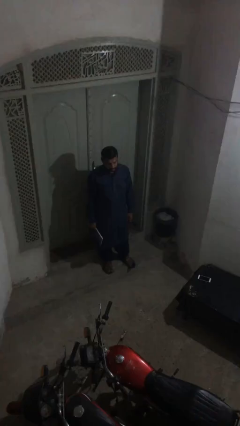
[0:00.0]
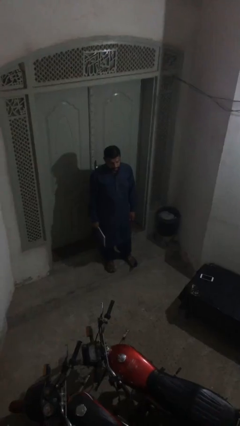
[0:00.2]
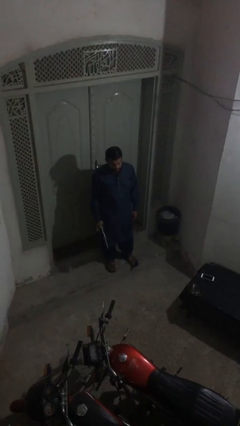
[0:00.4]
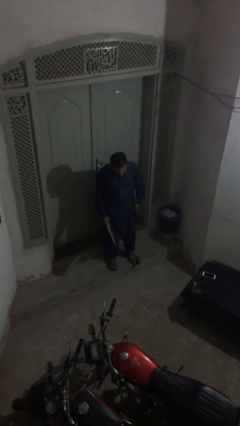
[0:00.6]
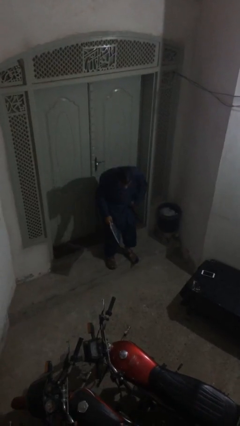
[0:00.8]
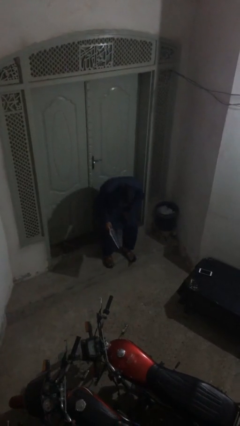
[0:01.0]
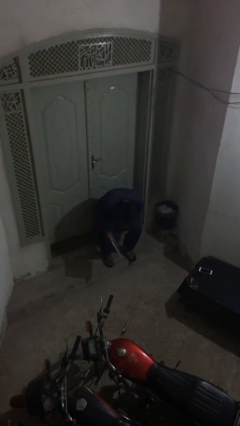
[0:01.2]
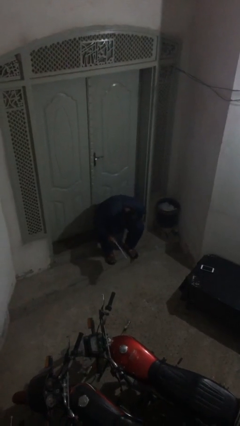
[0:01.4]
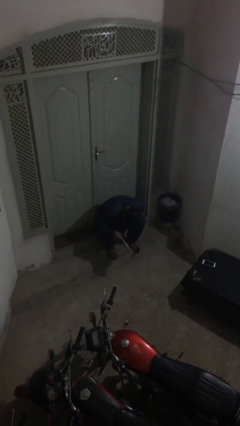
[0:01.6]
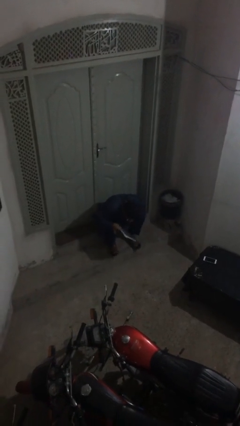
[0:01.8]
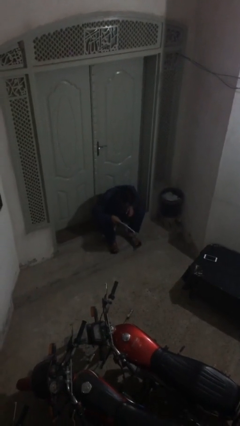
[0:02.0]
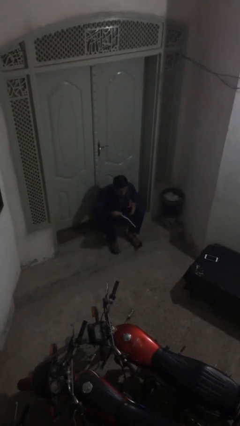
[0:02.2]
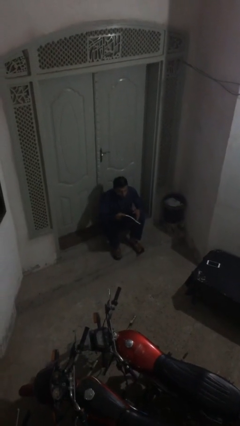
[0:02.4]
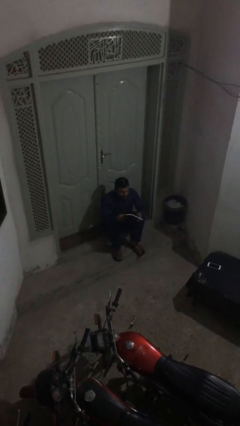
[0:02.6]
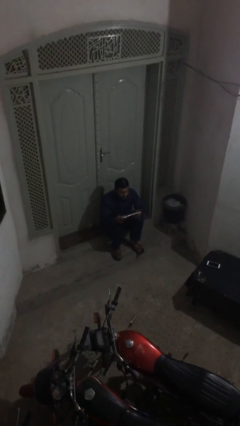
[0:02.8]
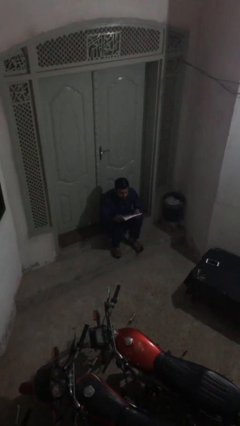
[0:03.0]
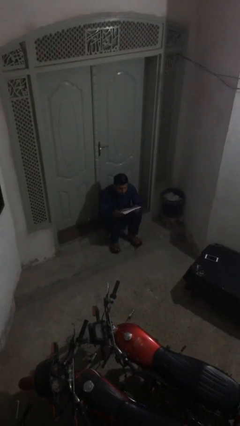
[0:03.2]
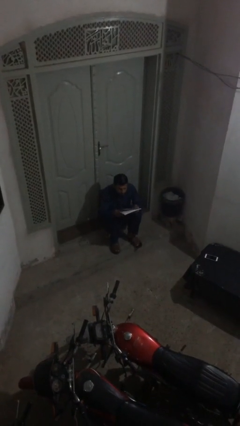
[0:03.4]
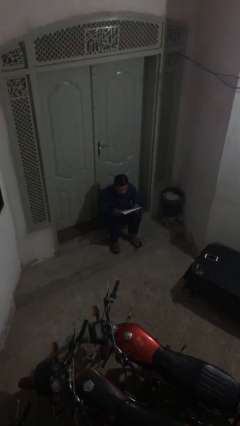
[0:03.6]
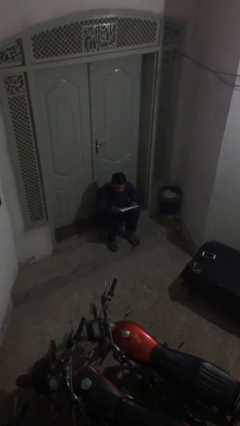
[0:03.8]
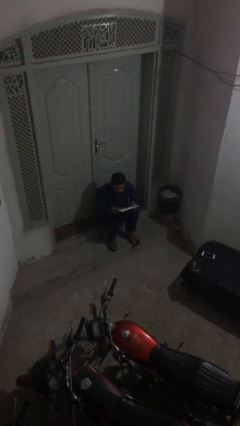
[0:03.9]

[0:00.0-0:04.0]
person sits down

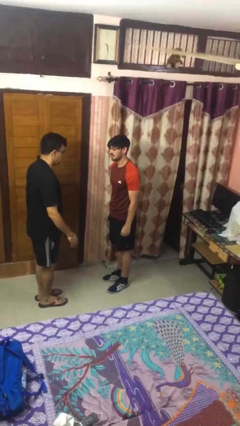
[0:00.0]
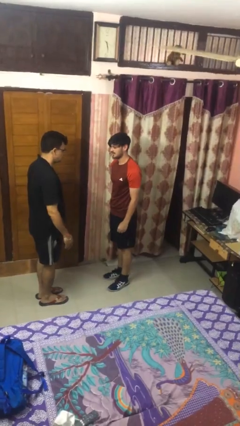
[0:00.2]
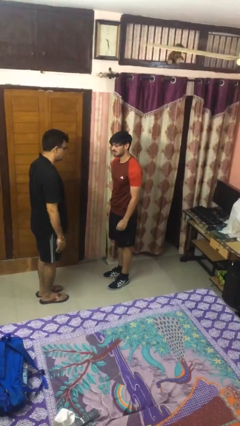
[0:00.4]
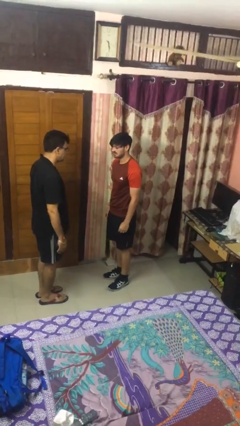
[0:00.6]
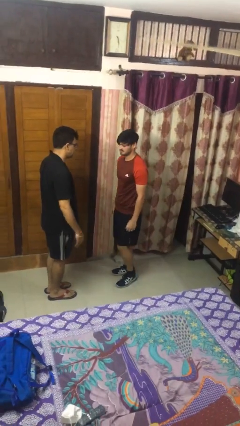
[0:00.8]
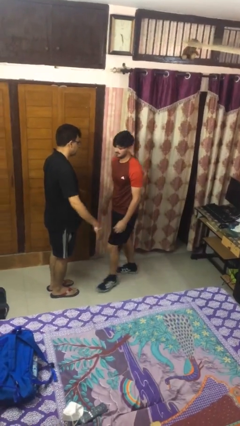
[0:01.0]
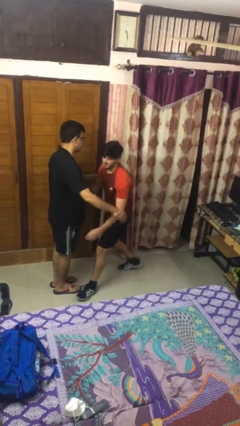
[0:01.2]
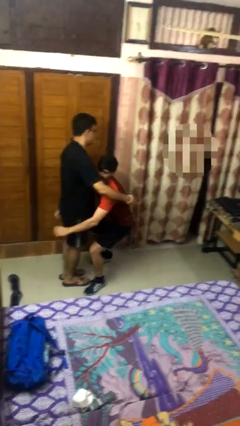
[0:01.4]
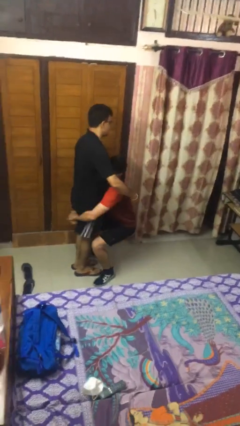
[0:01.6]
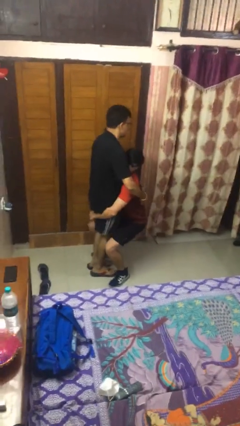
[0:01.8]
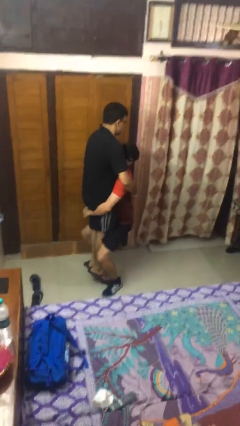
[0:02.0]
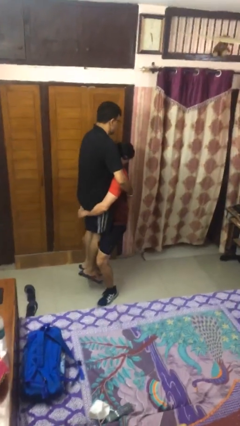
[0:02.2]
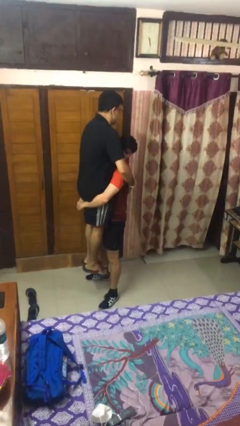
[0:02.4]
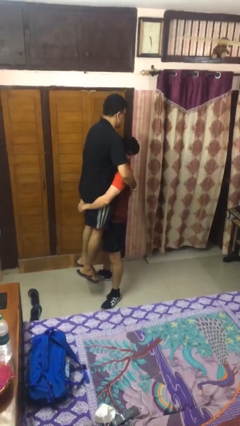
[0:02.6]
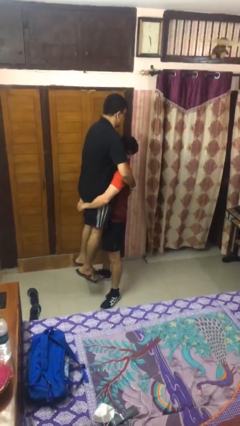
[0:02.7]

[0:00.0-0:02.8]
person picks up person

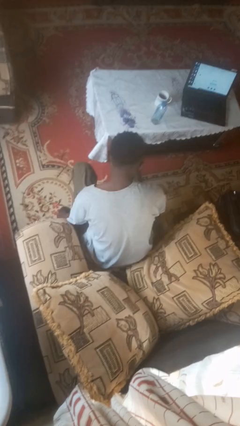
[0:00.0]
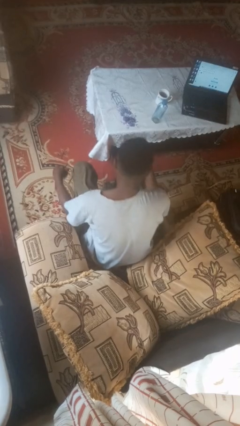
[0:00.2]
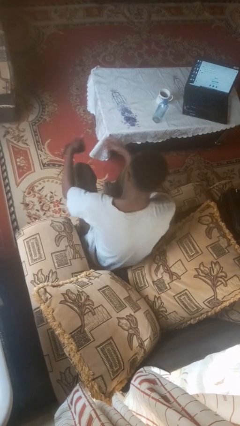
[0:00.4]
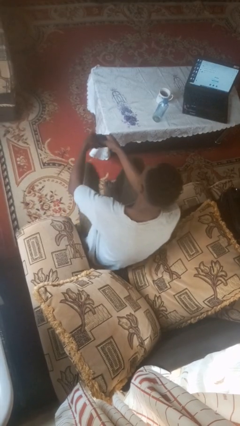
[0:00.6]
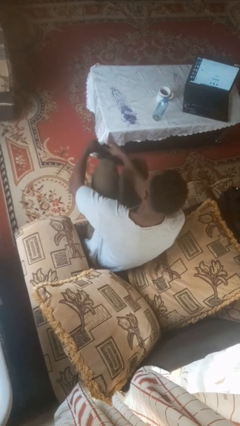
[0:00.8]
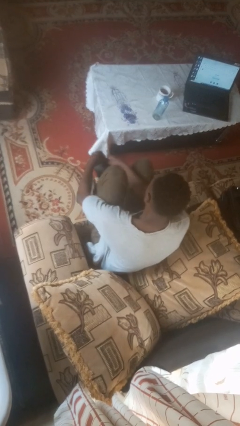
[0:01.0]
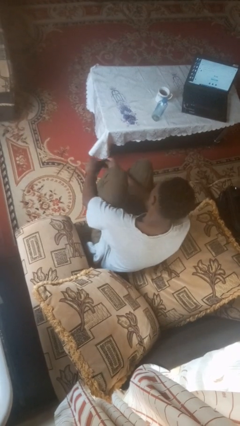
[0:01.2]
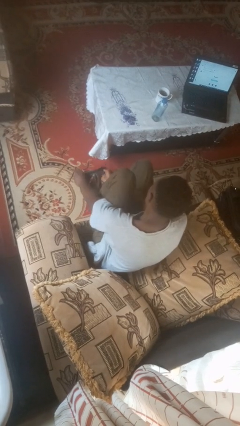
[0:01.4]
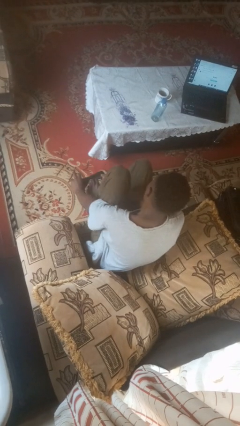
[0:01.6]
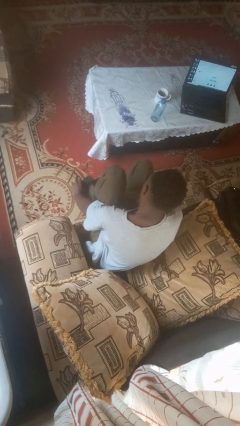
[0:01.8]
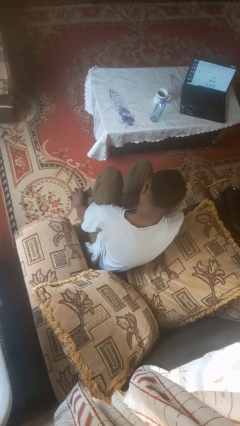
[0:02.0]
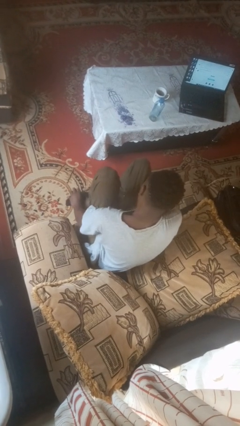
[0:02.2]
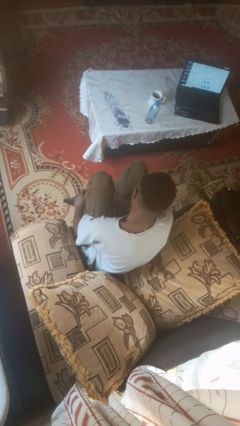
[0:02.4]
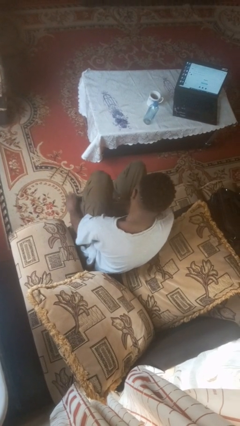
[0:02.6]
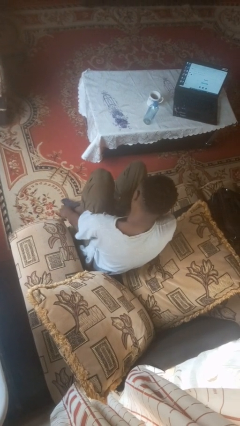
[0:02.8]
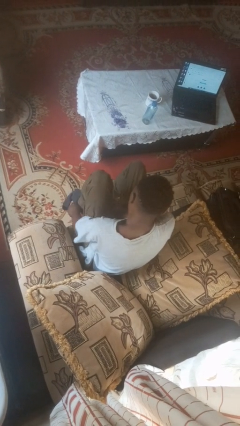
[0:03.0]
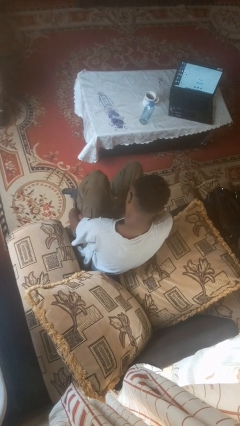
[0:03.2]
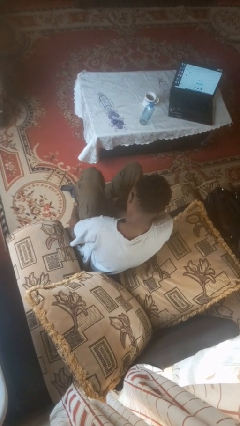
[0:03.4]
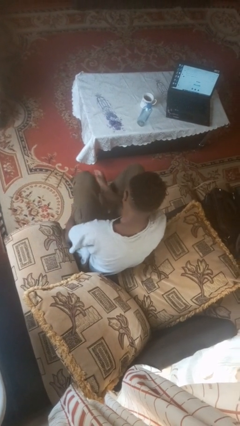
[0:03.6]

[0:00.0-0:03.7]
person puts on socks

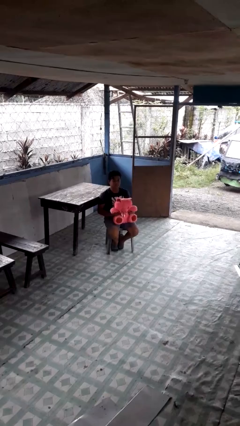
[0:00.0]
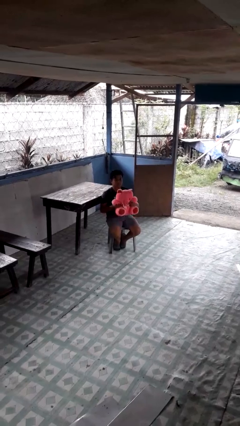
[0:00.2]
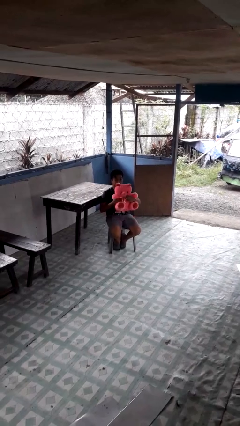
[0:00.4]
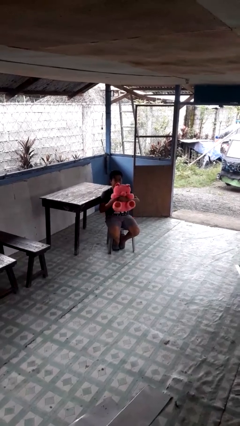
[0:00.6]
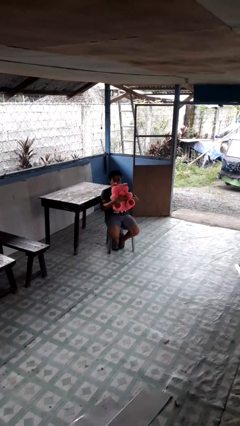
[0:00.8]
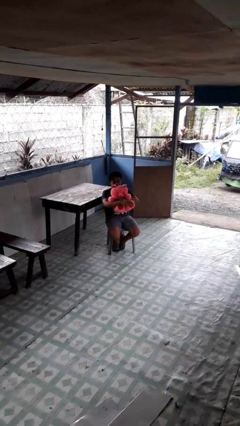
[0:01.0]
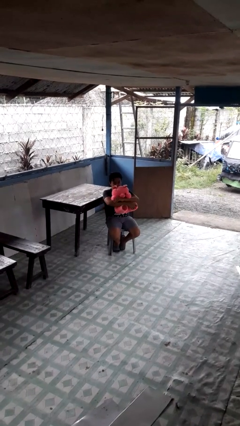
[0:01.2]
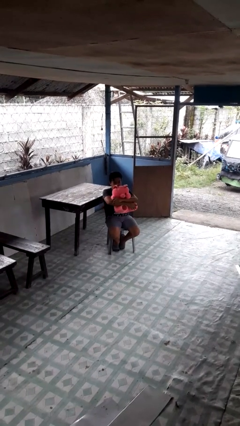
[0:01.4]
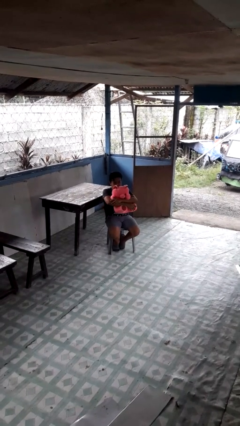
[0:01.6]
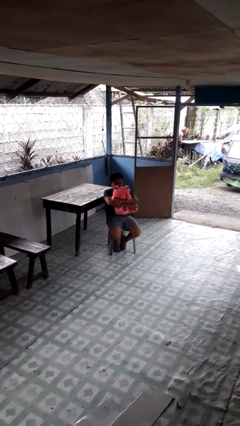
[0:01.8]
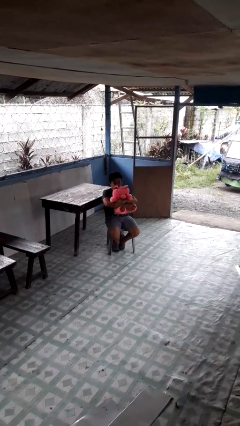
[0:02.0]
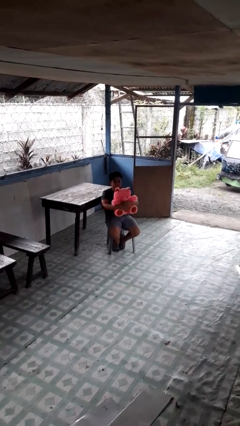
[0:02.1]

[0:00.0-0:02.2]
person hugs stuffed animal

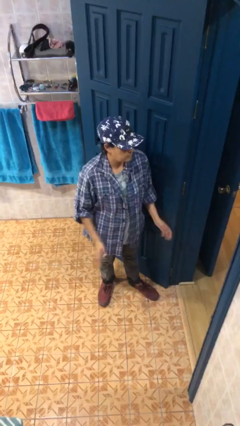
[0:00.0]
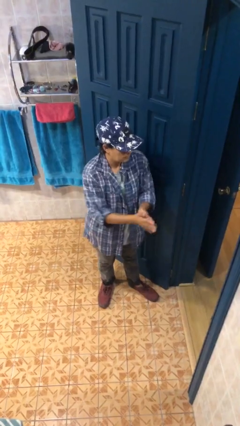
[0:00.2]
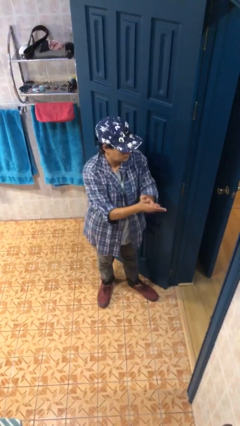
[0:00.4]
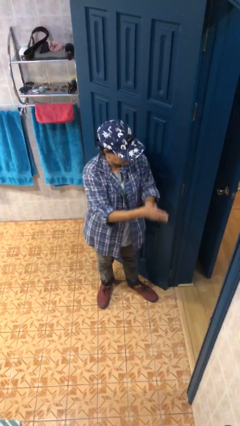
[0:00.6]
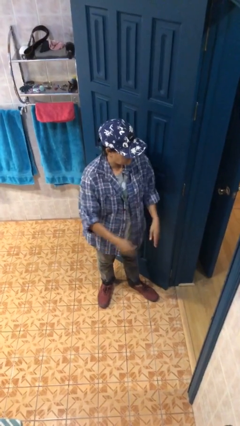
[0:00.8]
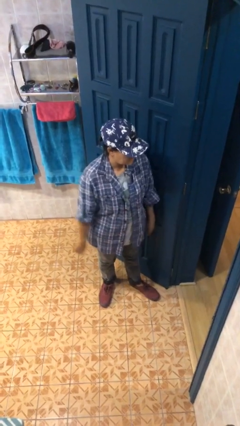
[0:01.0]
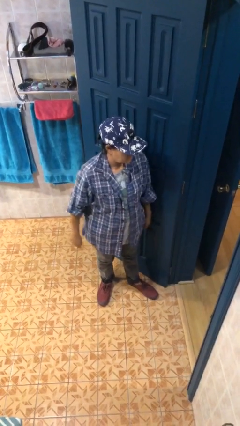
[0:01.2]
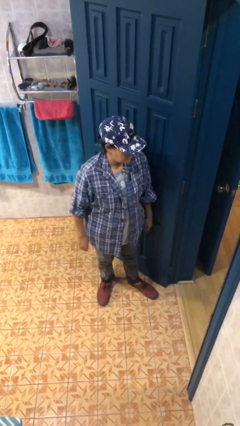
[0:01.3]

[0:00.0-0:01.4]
person claps hands

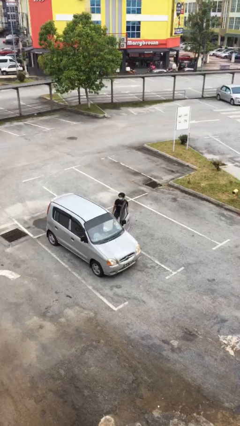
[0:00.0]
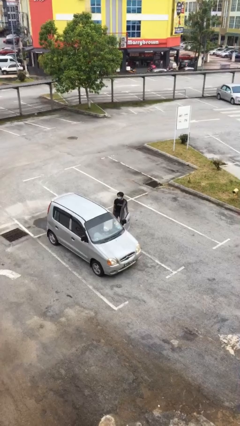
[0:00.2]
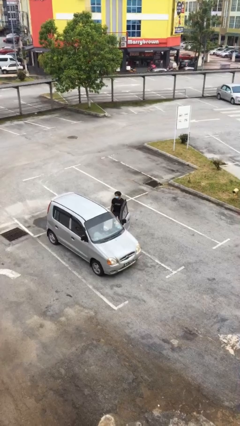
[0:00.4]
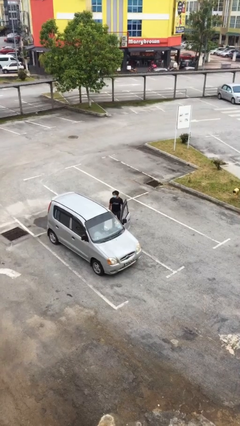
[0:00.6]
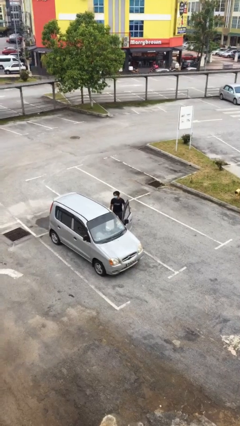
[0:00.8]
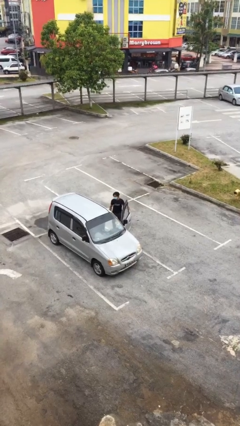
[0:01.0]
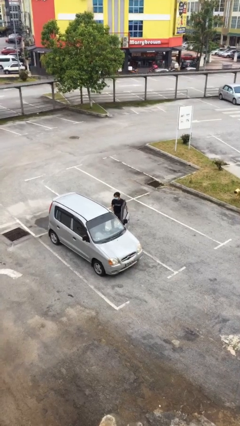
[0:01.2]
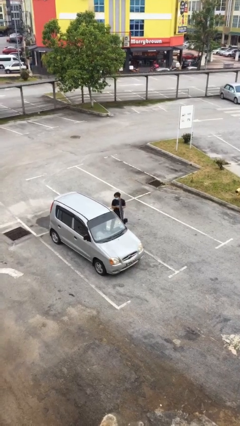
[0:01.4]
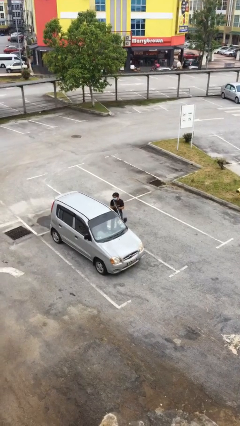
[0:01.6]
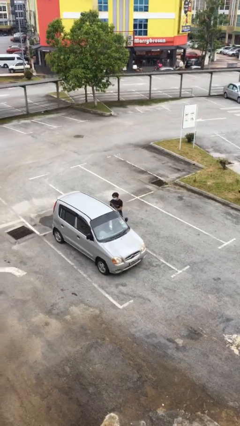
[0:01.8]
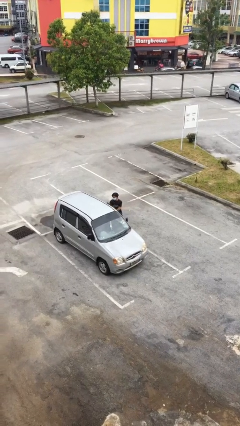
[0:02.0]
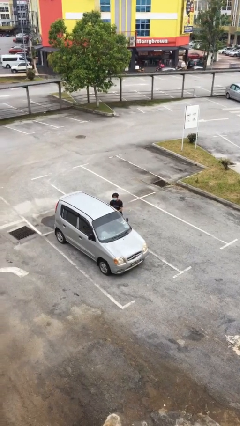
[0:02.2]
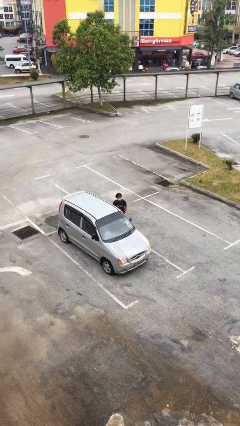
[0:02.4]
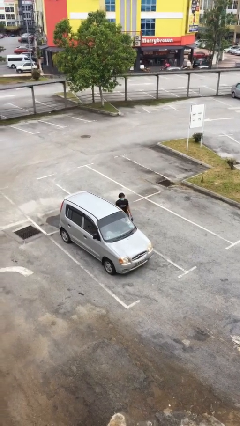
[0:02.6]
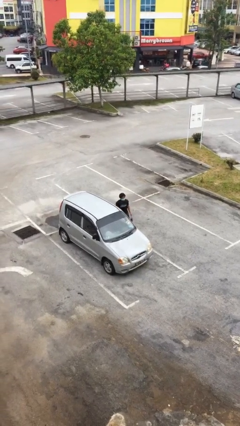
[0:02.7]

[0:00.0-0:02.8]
person closes car door

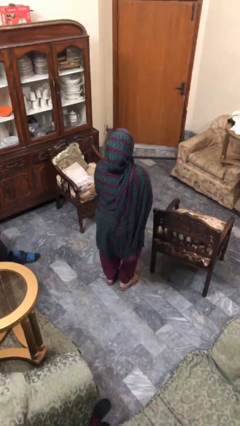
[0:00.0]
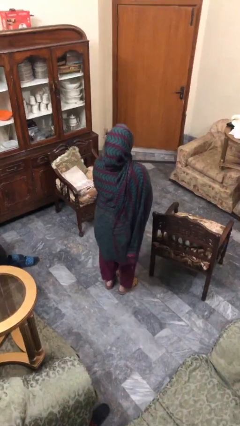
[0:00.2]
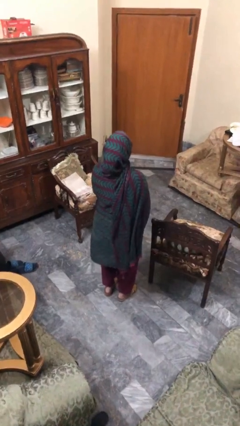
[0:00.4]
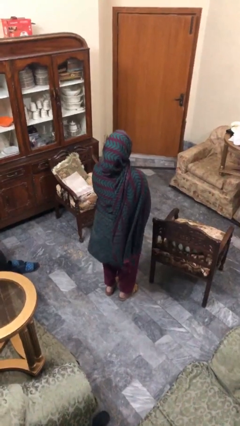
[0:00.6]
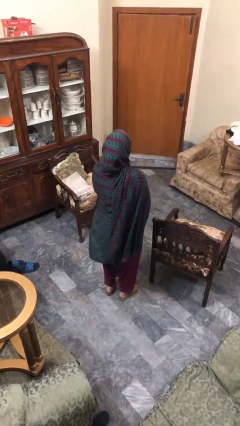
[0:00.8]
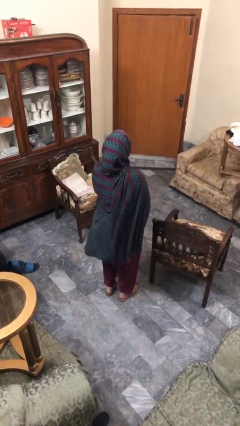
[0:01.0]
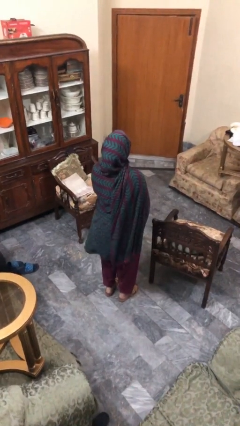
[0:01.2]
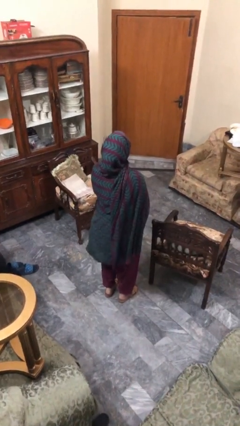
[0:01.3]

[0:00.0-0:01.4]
person stands up
